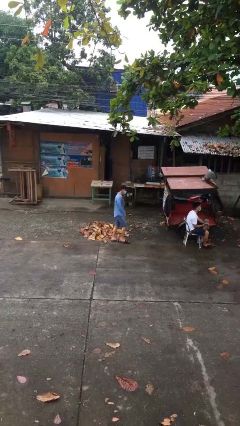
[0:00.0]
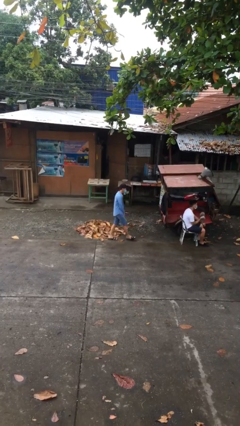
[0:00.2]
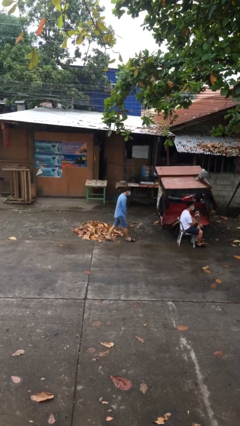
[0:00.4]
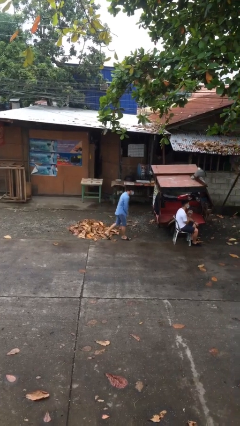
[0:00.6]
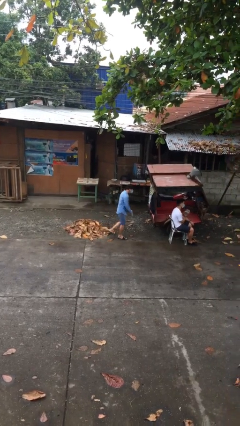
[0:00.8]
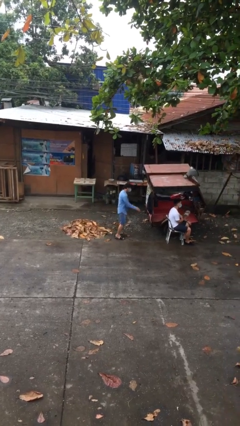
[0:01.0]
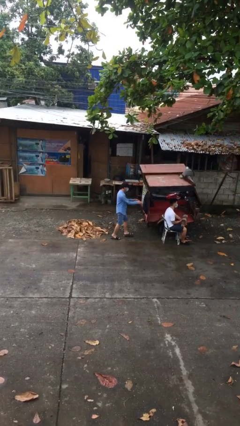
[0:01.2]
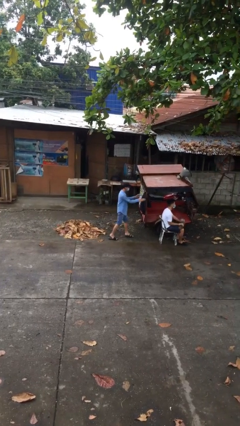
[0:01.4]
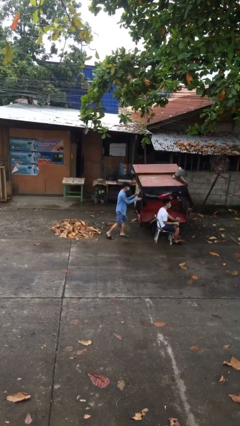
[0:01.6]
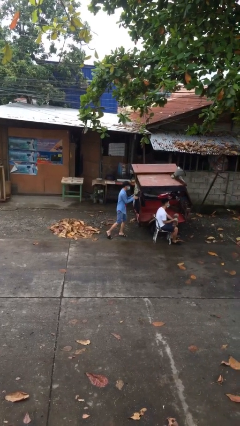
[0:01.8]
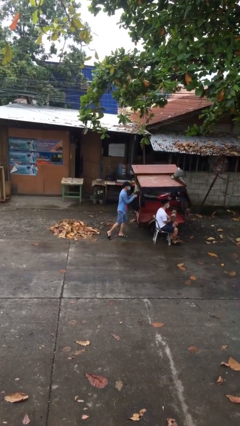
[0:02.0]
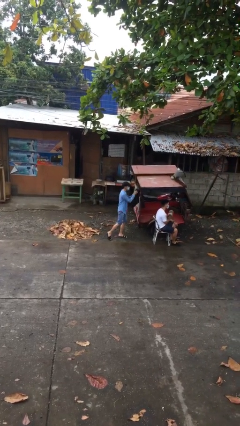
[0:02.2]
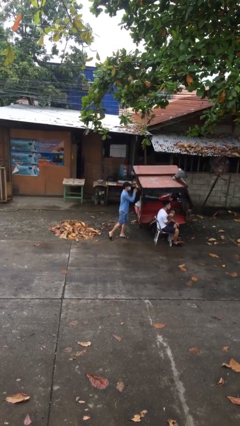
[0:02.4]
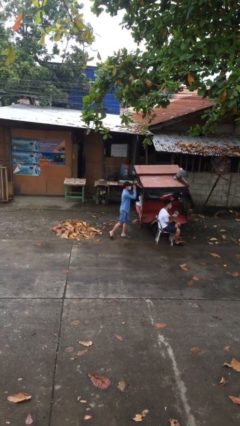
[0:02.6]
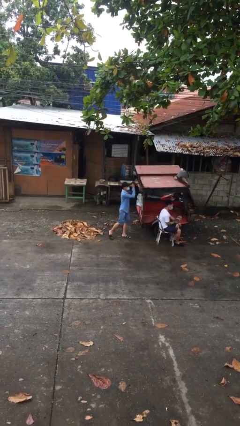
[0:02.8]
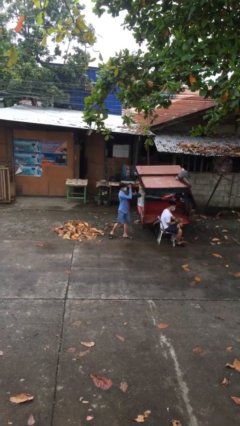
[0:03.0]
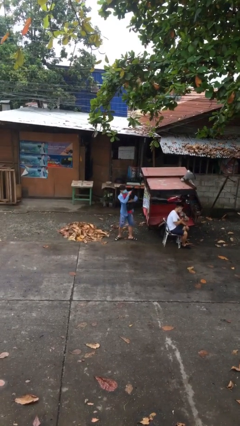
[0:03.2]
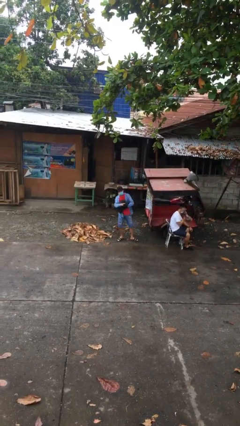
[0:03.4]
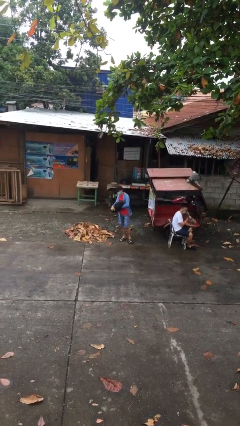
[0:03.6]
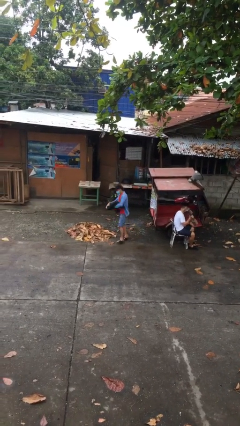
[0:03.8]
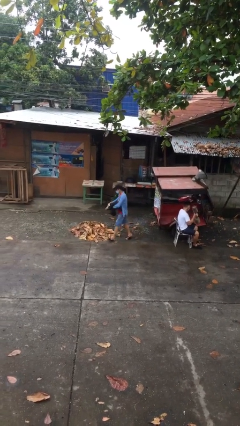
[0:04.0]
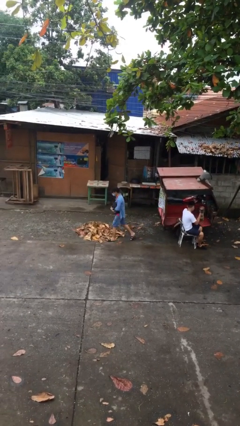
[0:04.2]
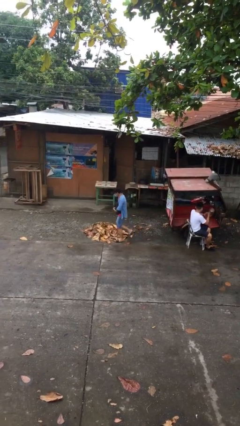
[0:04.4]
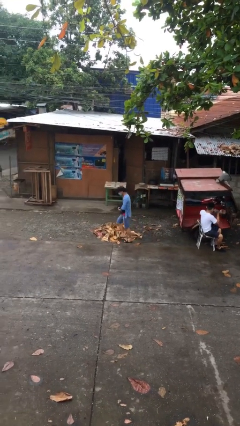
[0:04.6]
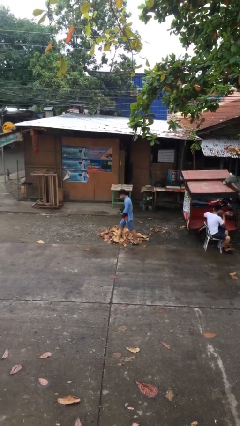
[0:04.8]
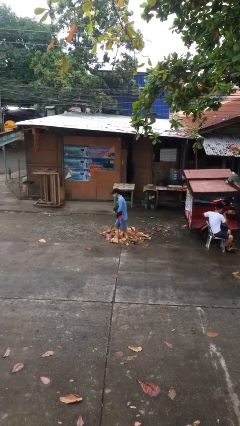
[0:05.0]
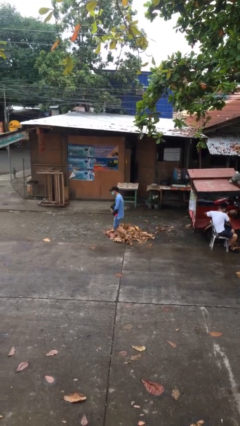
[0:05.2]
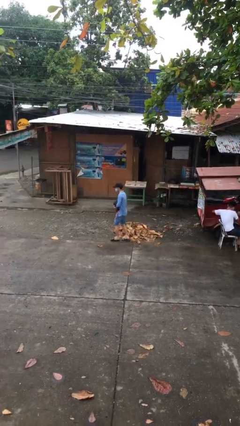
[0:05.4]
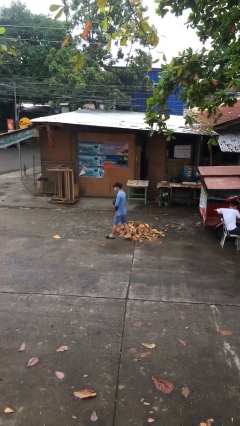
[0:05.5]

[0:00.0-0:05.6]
person steals object from person

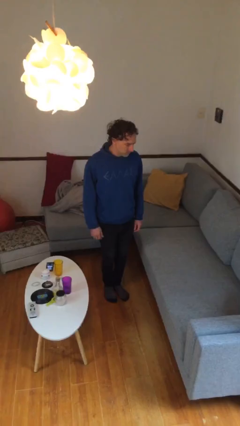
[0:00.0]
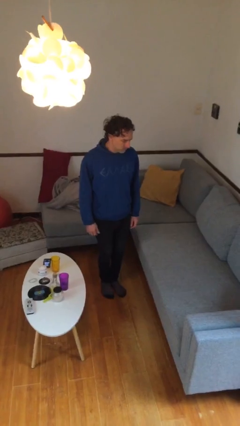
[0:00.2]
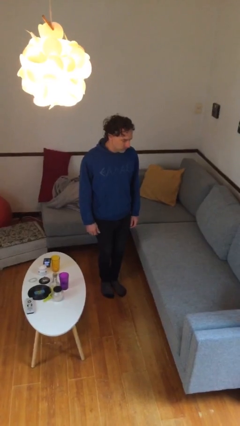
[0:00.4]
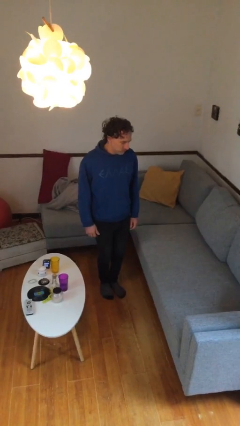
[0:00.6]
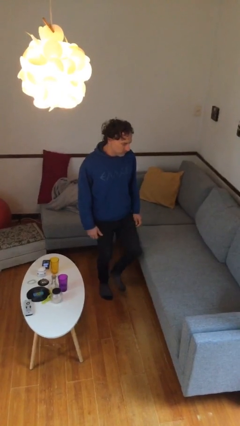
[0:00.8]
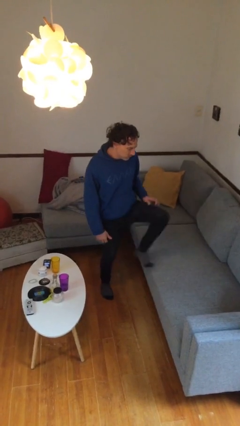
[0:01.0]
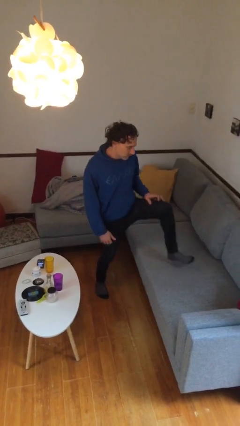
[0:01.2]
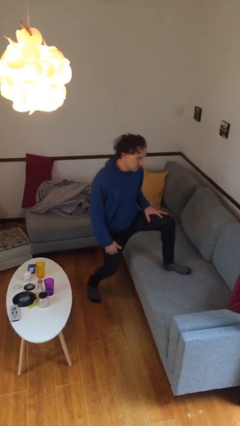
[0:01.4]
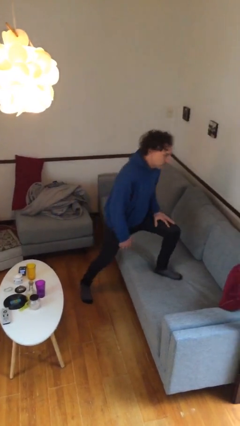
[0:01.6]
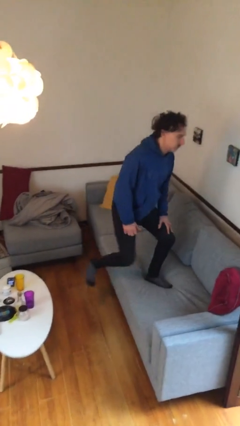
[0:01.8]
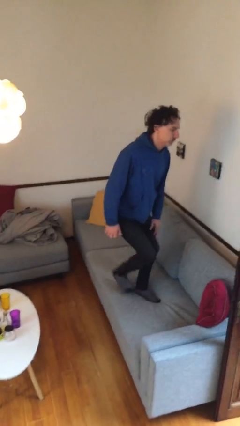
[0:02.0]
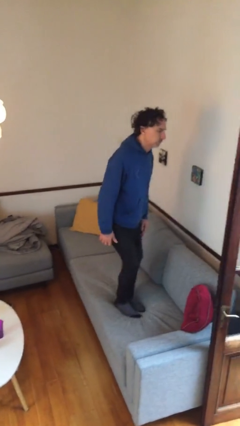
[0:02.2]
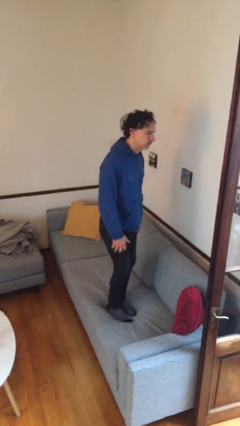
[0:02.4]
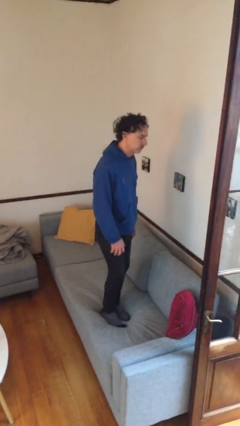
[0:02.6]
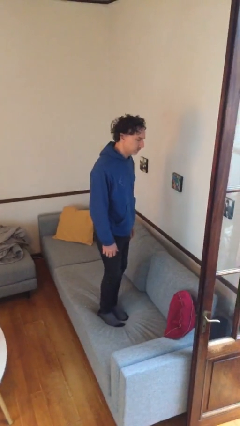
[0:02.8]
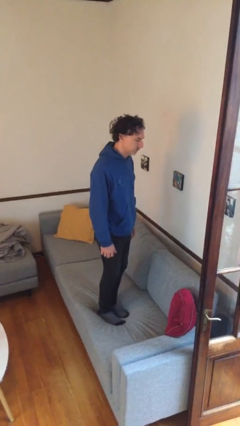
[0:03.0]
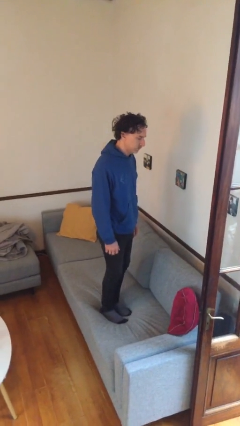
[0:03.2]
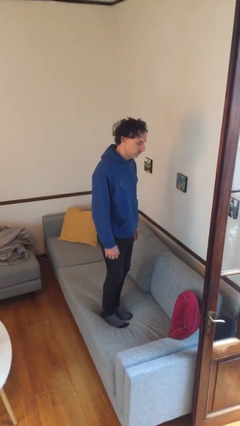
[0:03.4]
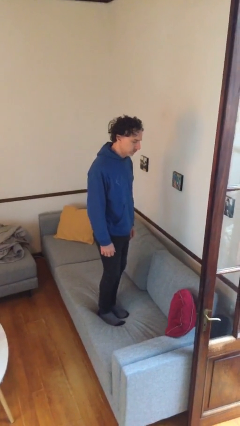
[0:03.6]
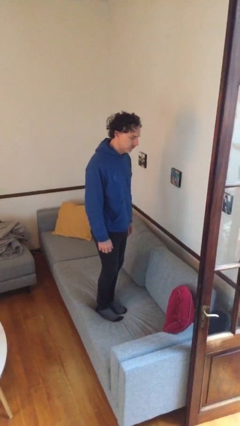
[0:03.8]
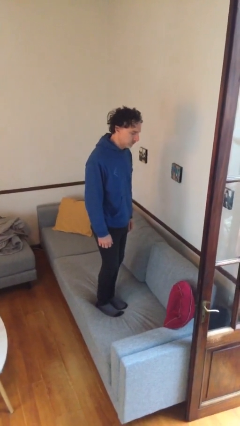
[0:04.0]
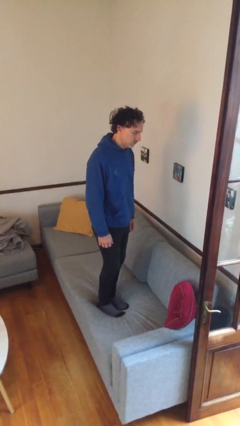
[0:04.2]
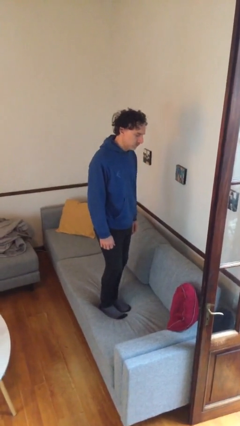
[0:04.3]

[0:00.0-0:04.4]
person climbs on couch

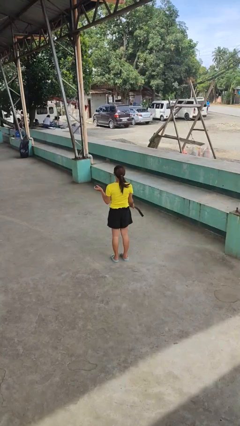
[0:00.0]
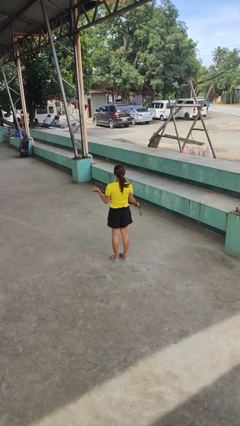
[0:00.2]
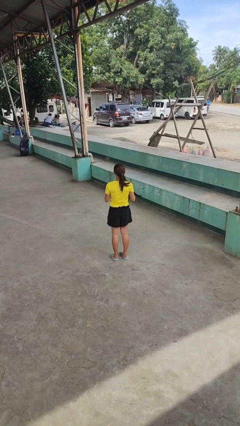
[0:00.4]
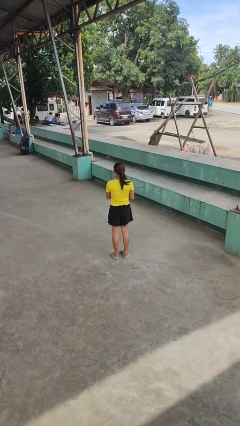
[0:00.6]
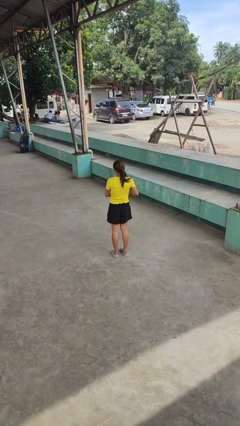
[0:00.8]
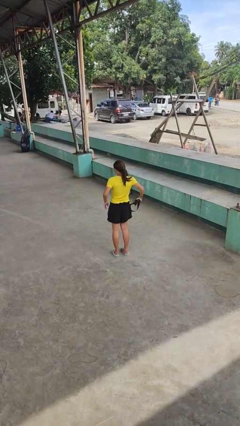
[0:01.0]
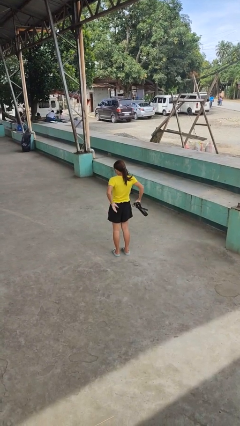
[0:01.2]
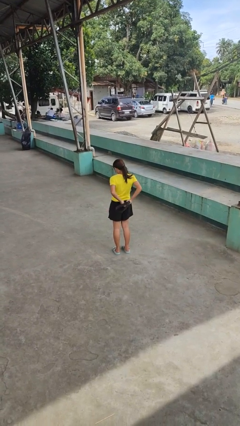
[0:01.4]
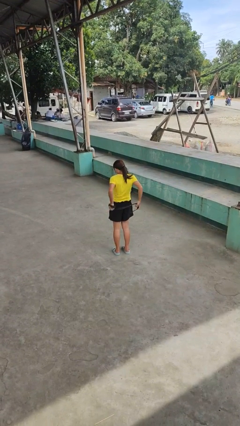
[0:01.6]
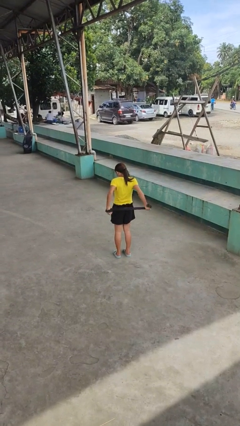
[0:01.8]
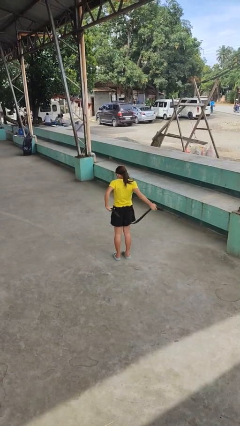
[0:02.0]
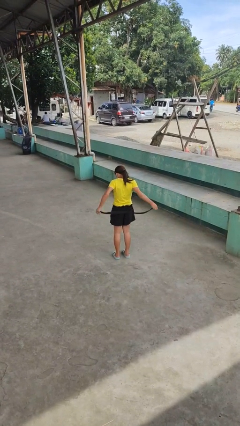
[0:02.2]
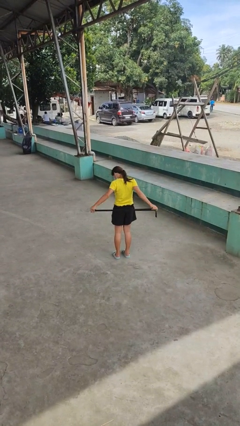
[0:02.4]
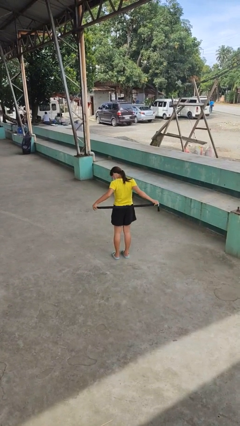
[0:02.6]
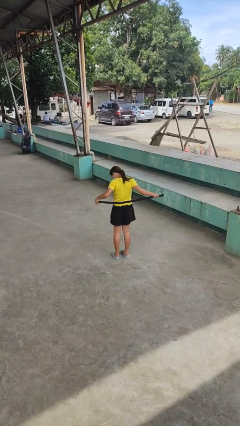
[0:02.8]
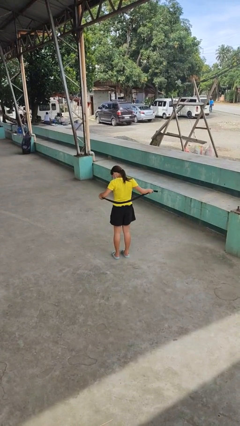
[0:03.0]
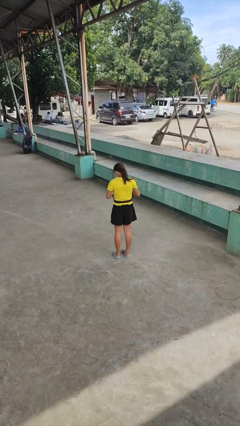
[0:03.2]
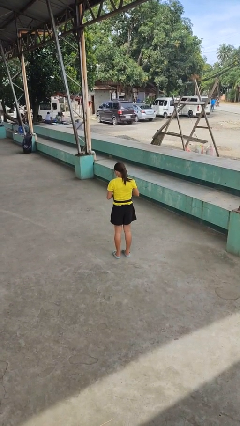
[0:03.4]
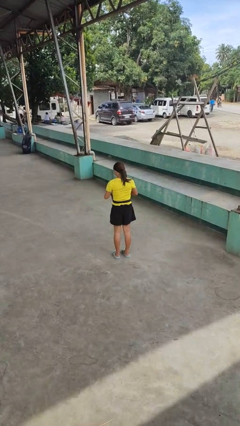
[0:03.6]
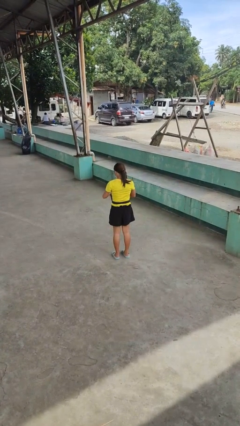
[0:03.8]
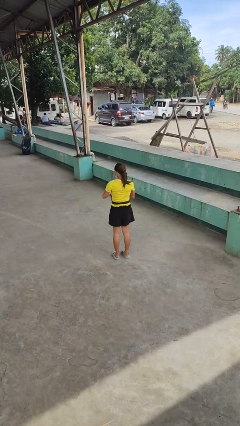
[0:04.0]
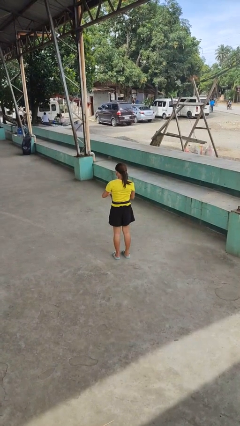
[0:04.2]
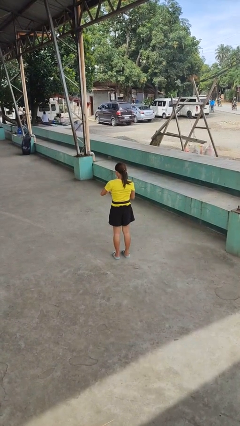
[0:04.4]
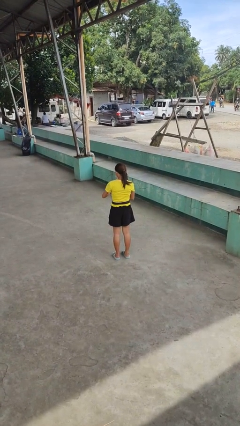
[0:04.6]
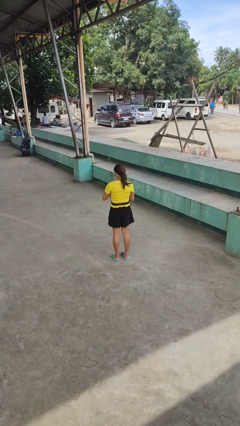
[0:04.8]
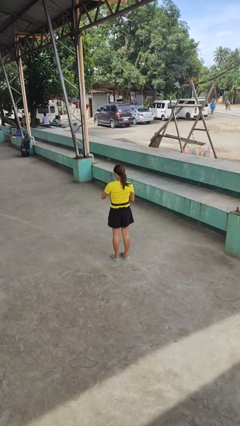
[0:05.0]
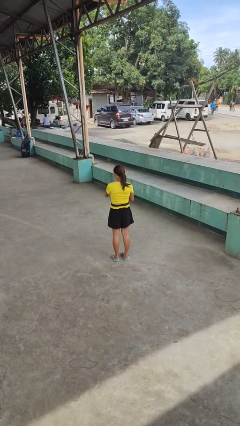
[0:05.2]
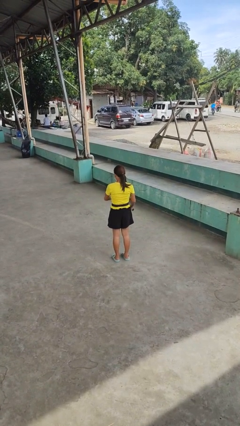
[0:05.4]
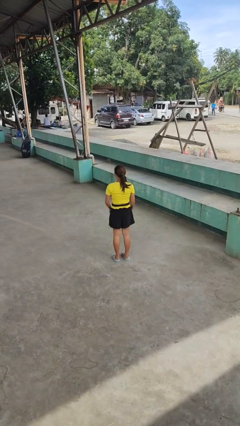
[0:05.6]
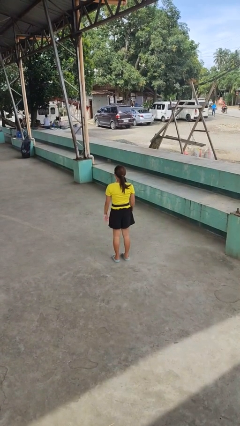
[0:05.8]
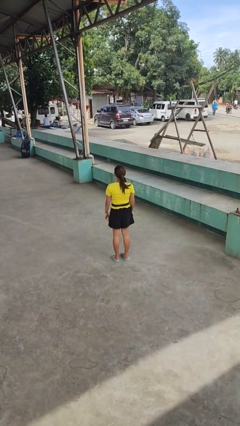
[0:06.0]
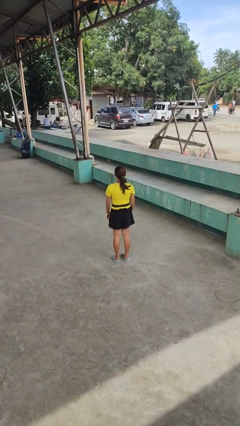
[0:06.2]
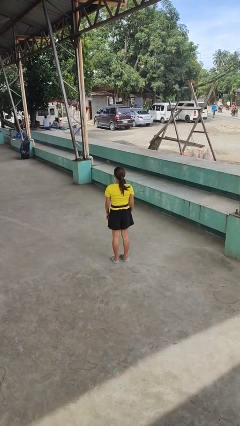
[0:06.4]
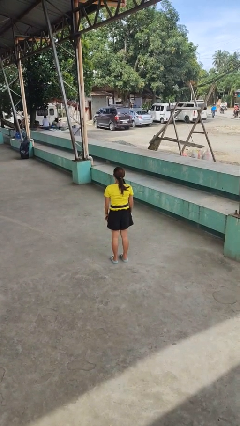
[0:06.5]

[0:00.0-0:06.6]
person puts on belt

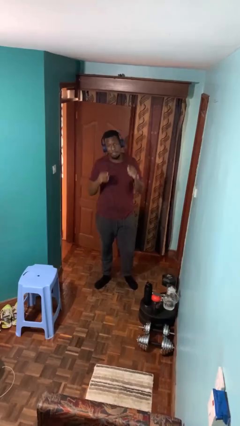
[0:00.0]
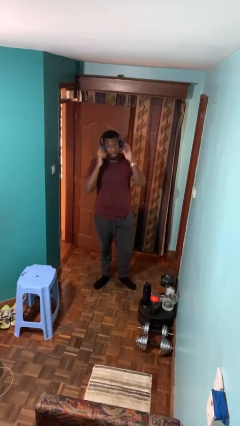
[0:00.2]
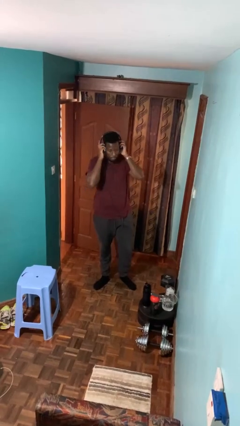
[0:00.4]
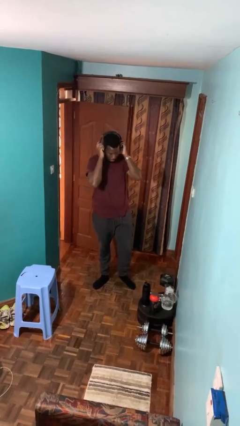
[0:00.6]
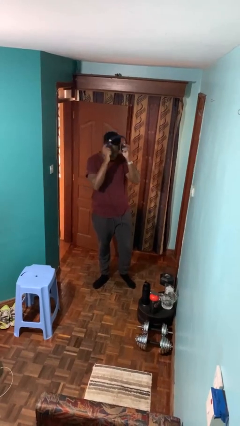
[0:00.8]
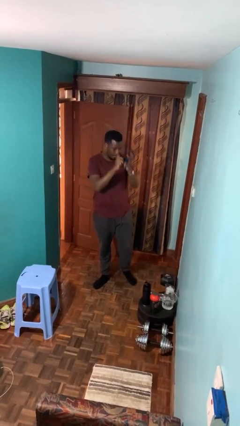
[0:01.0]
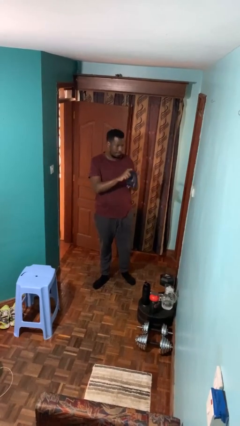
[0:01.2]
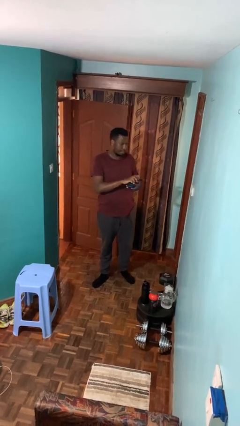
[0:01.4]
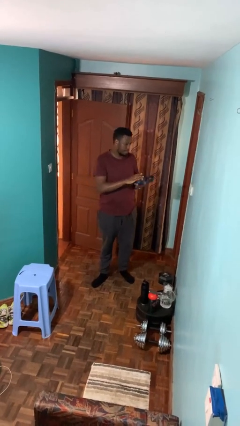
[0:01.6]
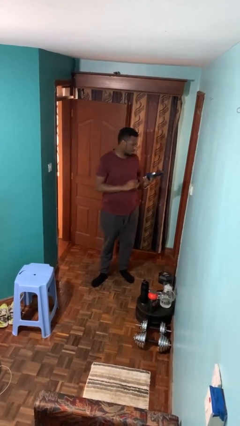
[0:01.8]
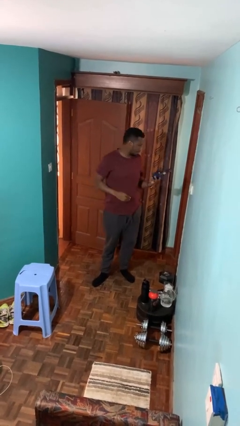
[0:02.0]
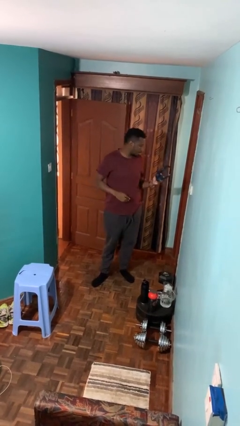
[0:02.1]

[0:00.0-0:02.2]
person takes off headphones
